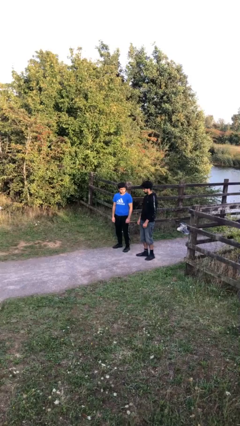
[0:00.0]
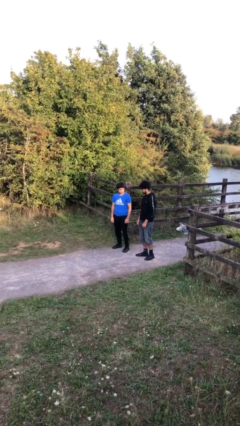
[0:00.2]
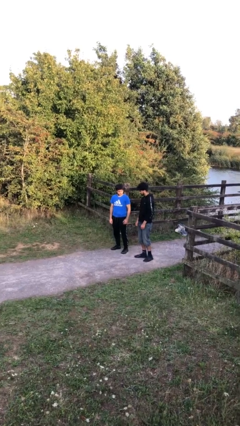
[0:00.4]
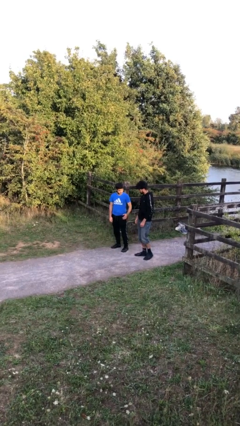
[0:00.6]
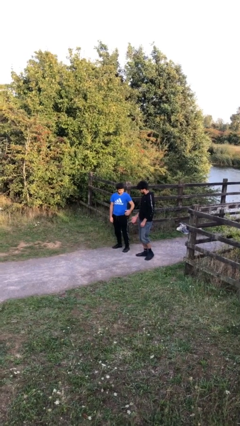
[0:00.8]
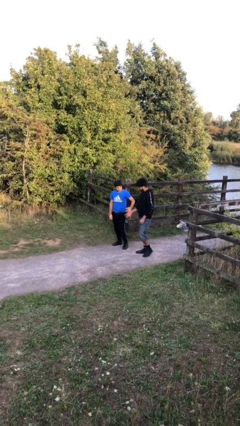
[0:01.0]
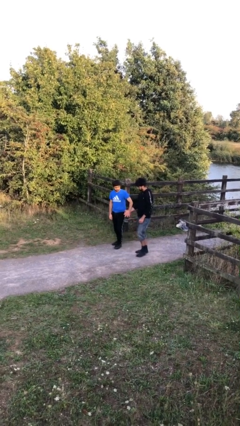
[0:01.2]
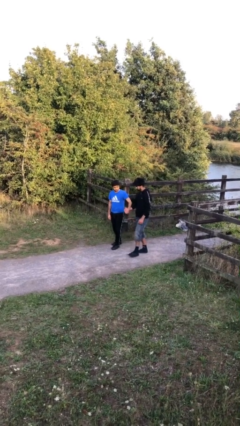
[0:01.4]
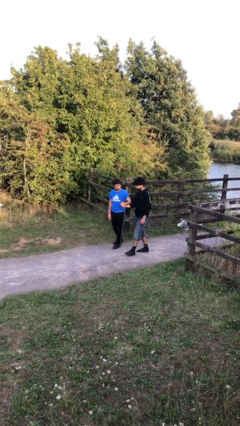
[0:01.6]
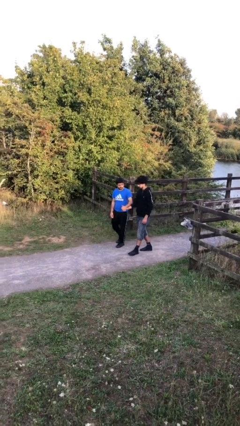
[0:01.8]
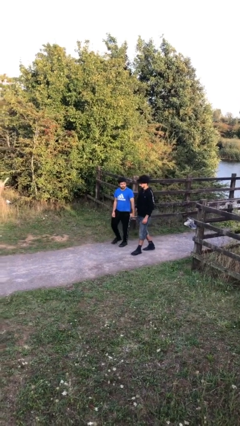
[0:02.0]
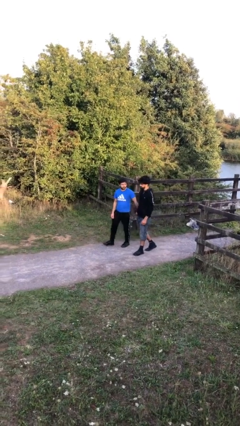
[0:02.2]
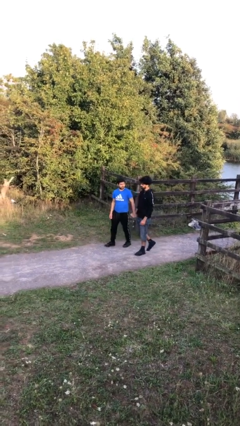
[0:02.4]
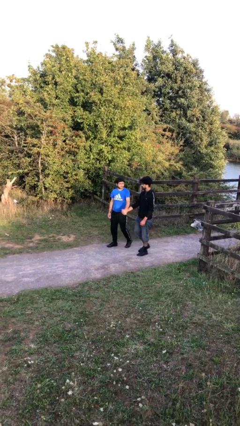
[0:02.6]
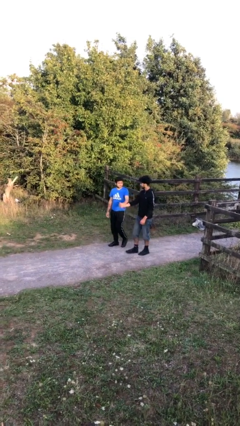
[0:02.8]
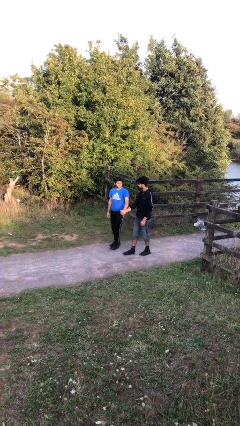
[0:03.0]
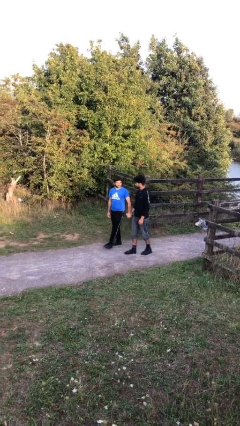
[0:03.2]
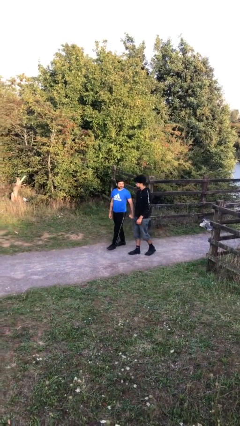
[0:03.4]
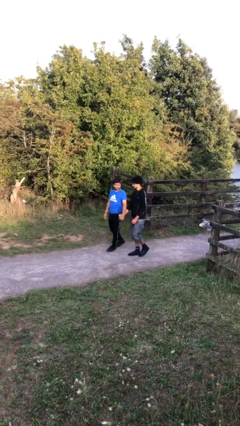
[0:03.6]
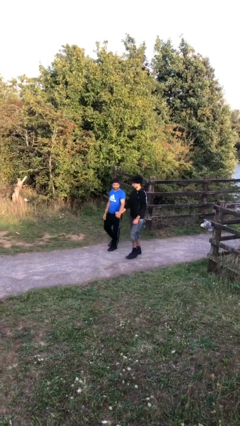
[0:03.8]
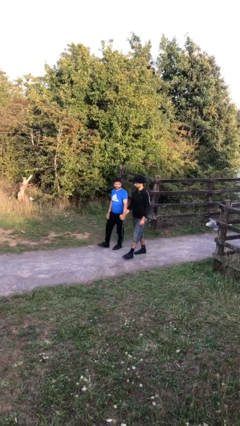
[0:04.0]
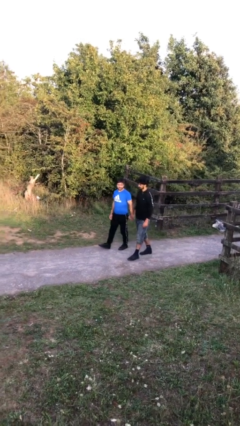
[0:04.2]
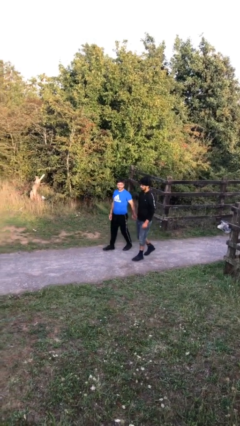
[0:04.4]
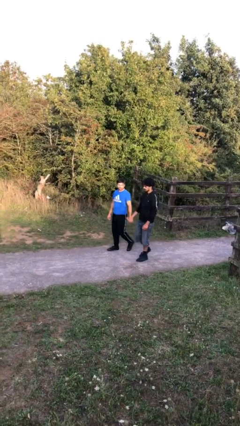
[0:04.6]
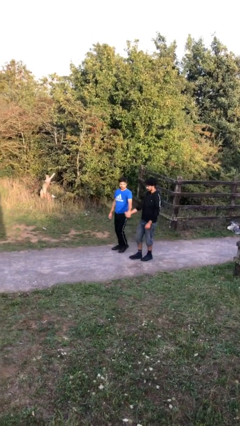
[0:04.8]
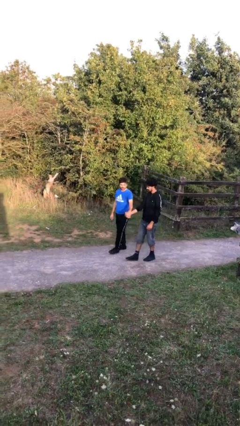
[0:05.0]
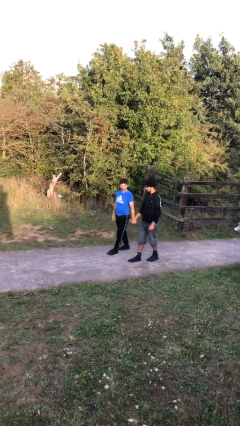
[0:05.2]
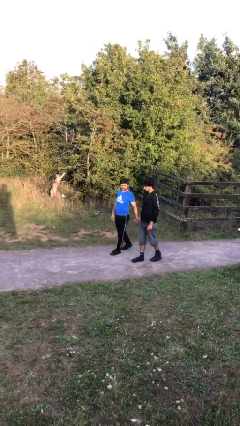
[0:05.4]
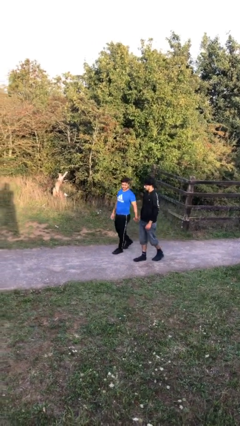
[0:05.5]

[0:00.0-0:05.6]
person holds hand

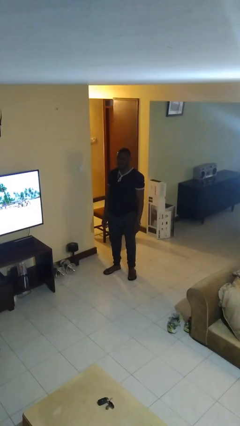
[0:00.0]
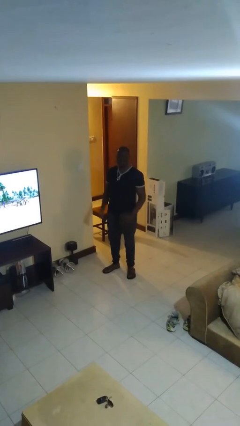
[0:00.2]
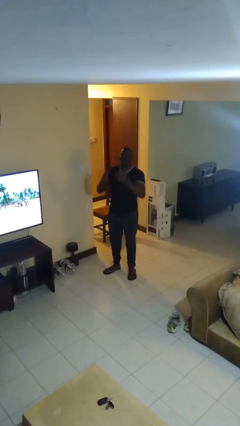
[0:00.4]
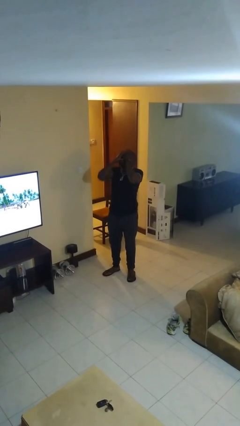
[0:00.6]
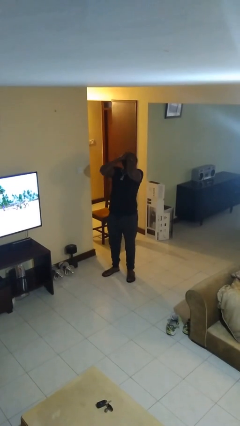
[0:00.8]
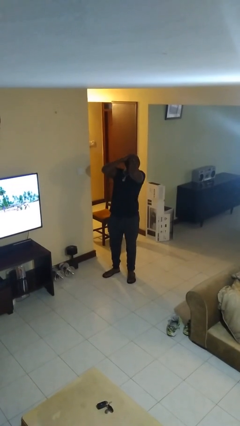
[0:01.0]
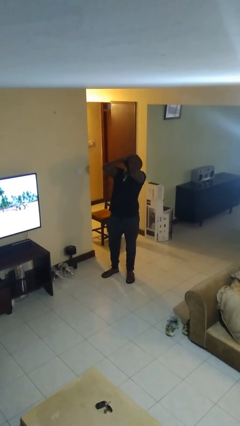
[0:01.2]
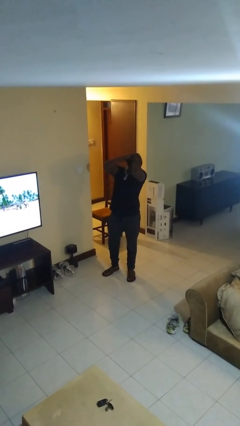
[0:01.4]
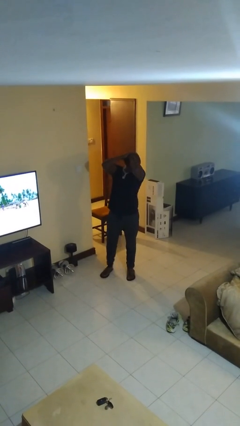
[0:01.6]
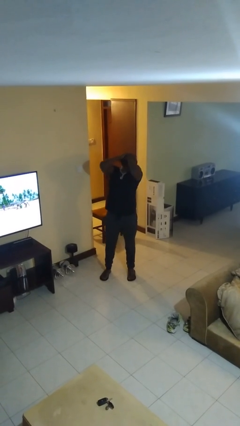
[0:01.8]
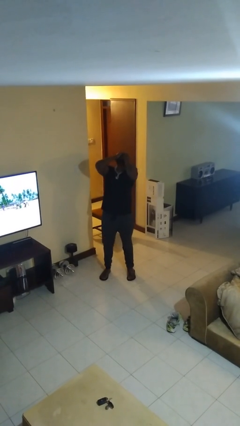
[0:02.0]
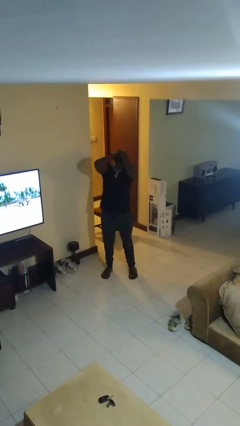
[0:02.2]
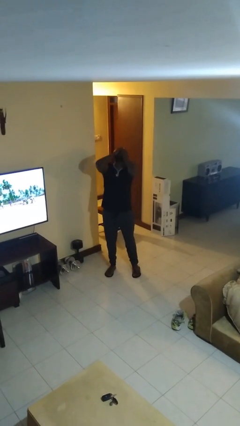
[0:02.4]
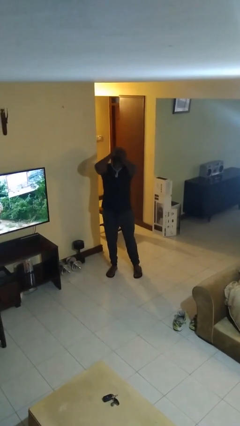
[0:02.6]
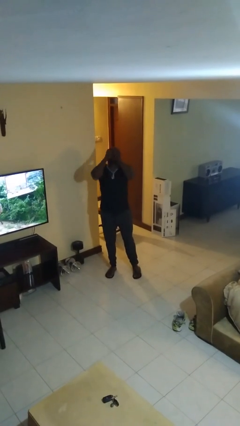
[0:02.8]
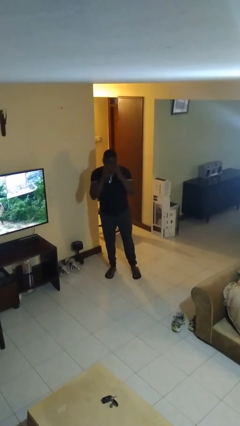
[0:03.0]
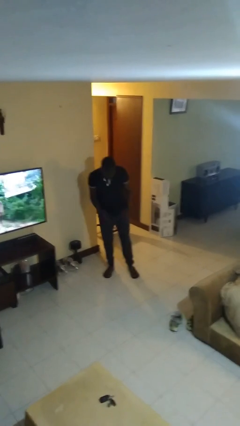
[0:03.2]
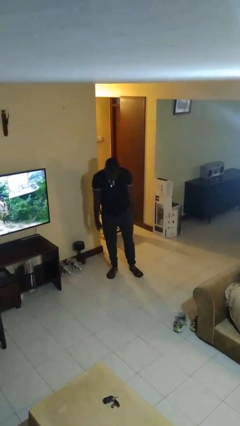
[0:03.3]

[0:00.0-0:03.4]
person covers face with hands

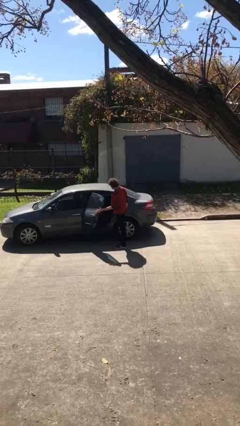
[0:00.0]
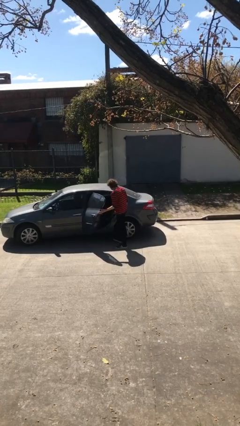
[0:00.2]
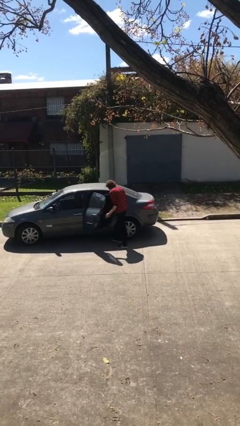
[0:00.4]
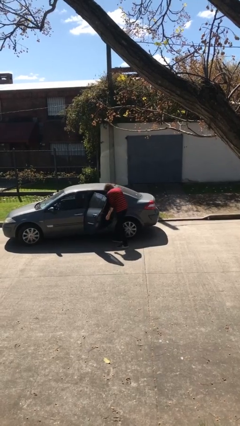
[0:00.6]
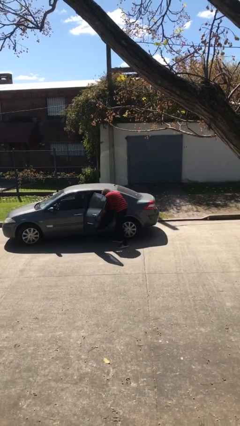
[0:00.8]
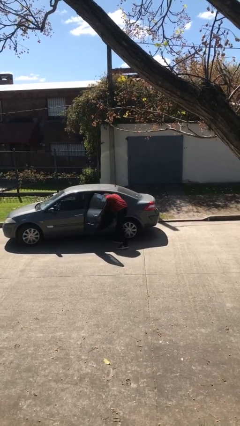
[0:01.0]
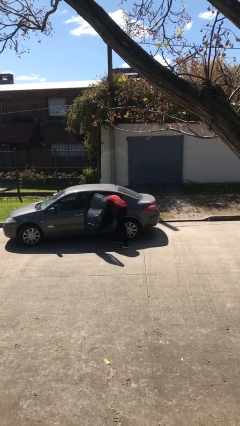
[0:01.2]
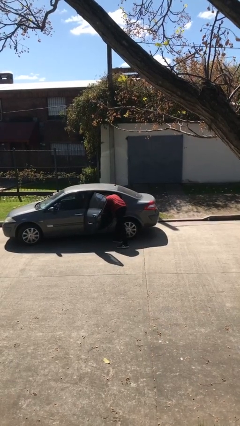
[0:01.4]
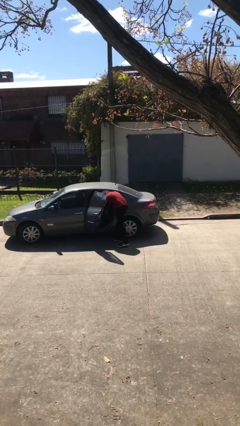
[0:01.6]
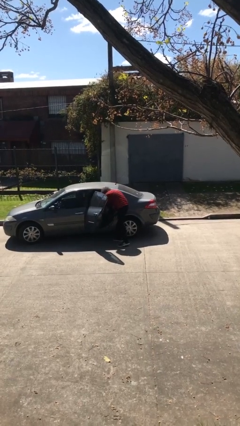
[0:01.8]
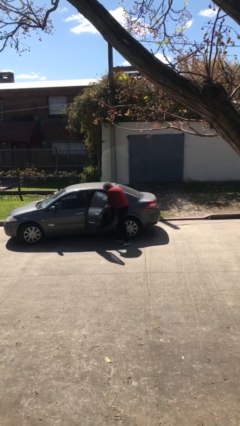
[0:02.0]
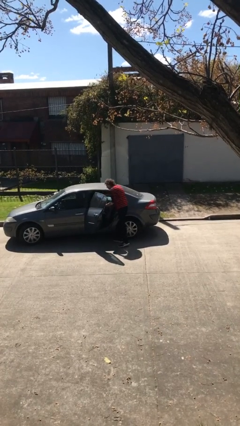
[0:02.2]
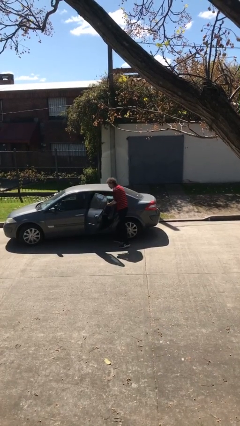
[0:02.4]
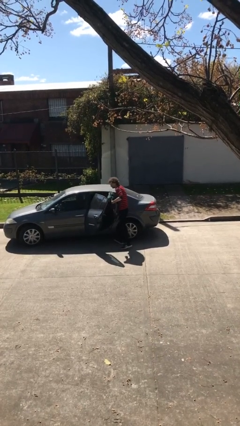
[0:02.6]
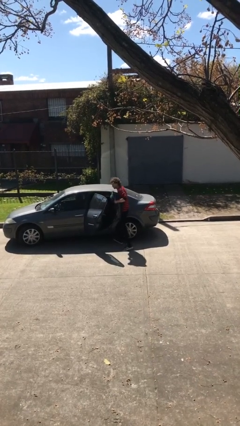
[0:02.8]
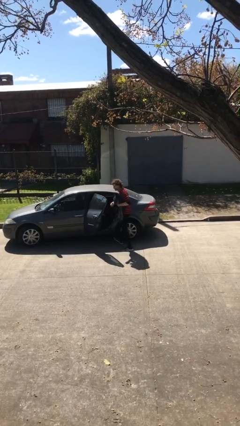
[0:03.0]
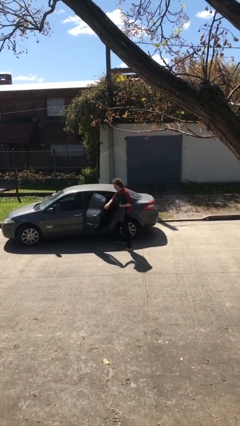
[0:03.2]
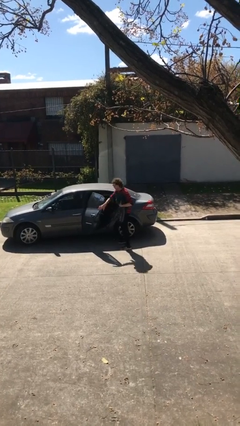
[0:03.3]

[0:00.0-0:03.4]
person unloads car

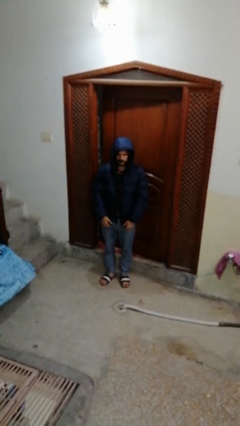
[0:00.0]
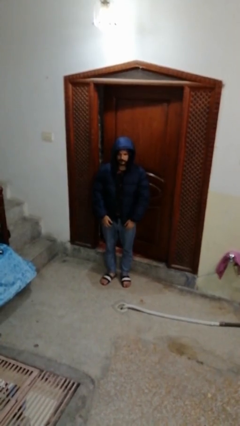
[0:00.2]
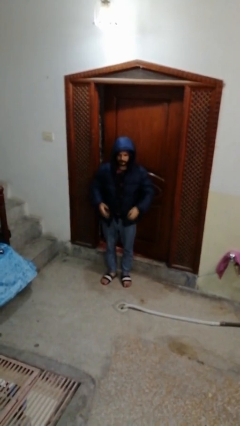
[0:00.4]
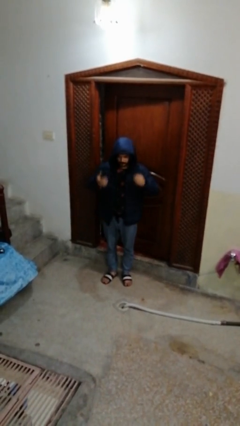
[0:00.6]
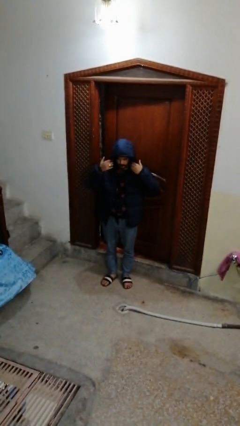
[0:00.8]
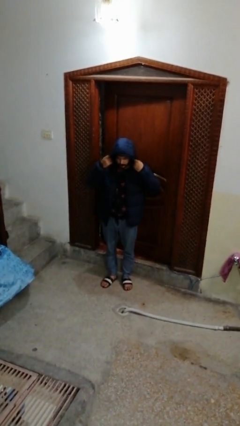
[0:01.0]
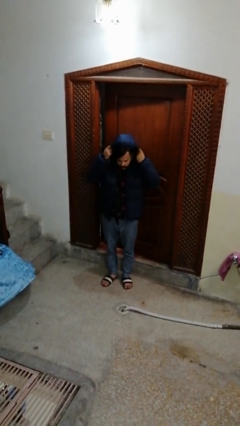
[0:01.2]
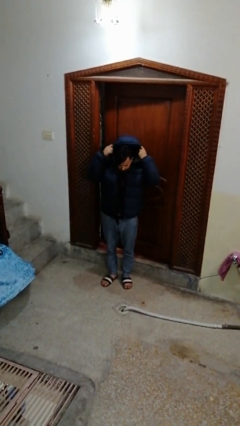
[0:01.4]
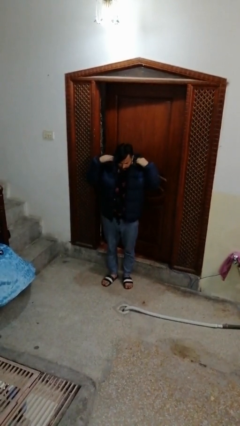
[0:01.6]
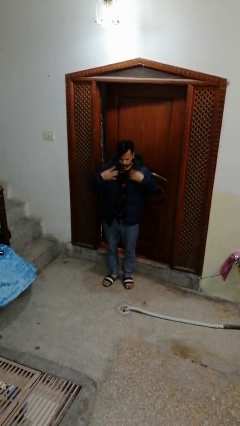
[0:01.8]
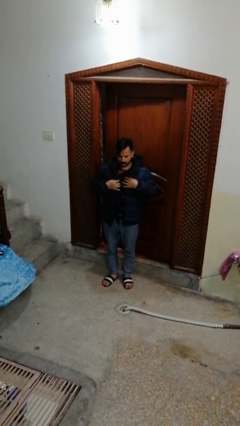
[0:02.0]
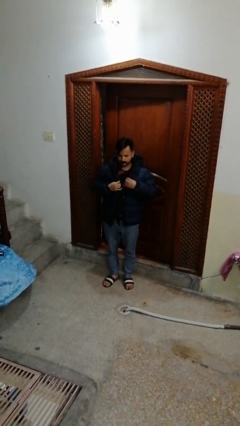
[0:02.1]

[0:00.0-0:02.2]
person takes off hoodie

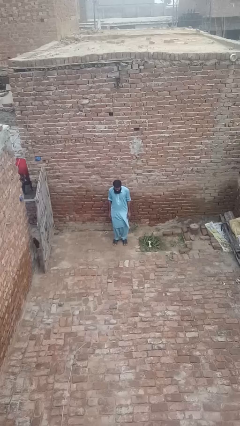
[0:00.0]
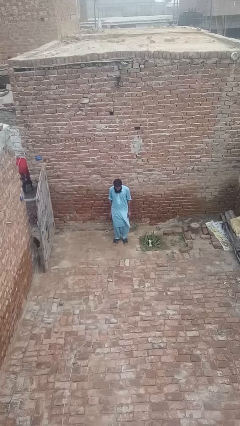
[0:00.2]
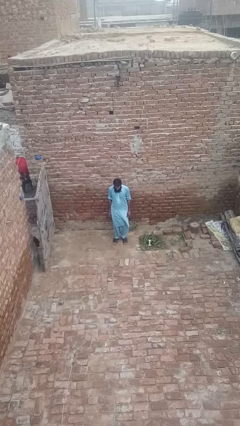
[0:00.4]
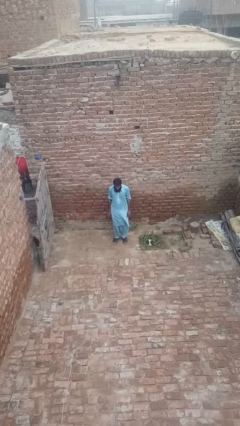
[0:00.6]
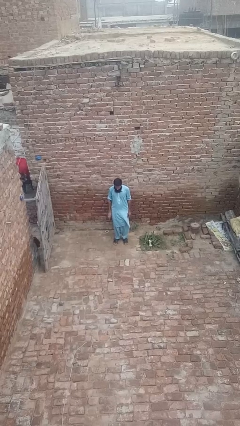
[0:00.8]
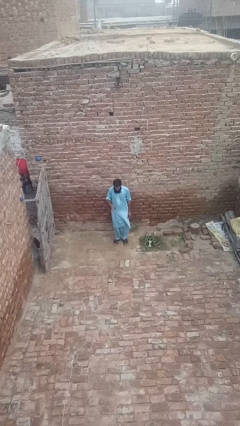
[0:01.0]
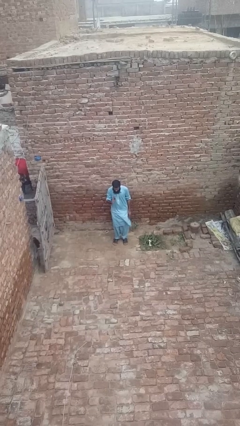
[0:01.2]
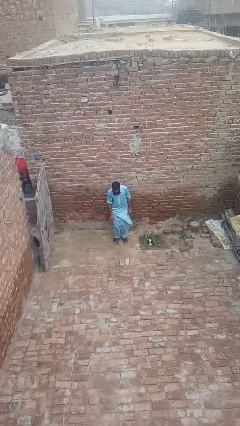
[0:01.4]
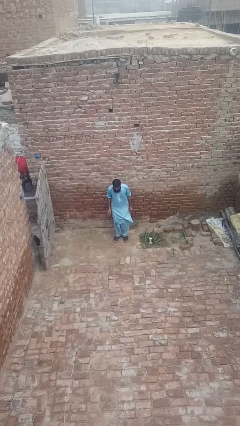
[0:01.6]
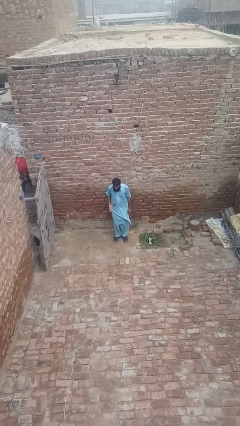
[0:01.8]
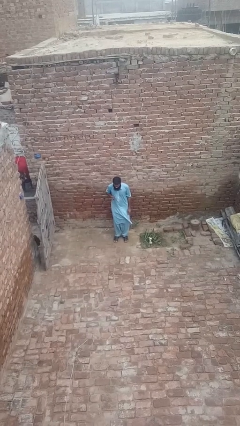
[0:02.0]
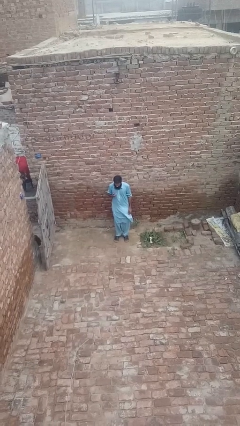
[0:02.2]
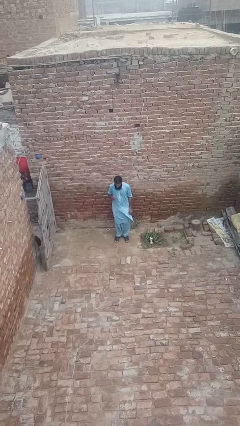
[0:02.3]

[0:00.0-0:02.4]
person bounces ball on floor

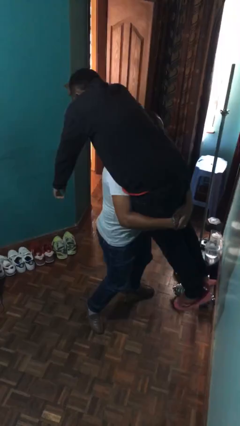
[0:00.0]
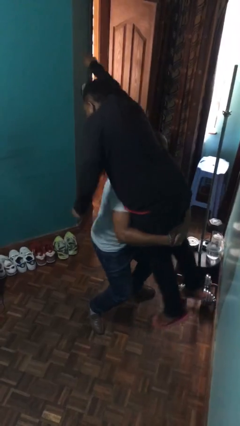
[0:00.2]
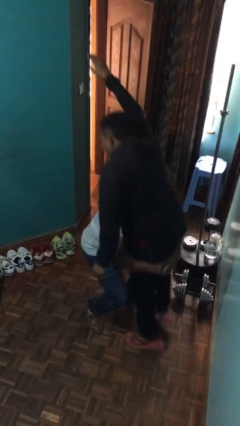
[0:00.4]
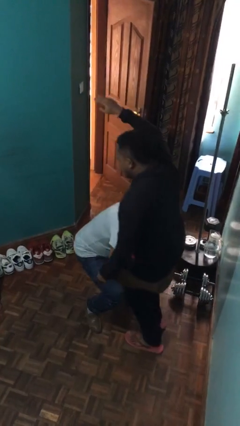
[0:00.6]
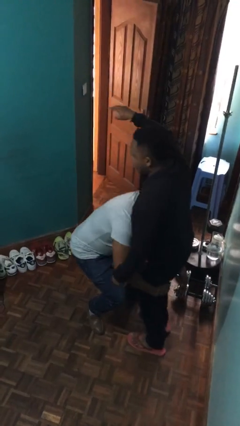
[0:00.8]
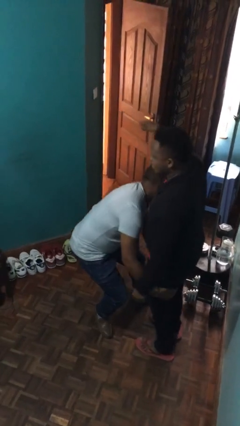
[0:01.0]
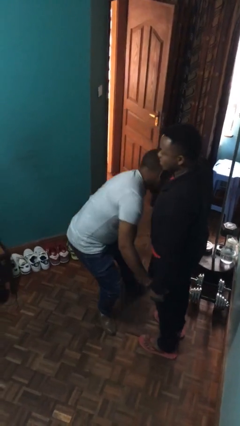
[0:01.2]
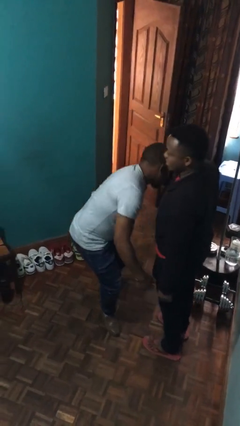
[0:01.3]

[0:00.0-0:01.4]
person puts down person
